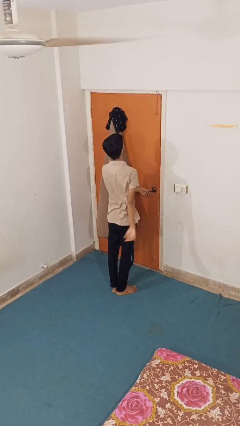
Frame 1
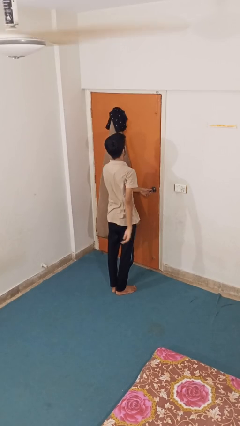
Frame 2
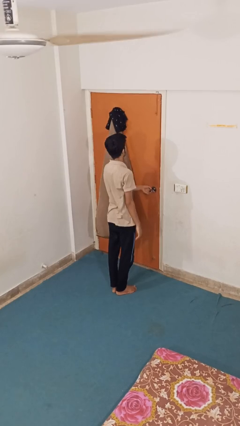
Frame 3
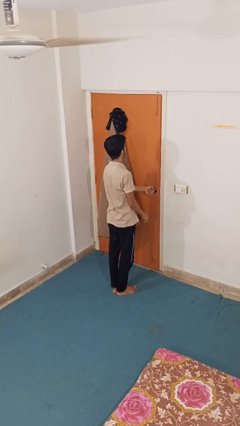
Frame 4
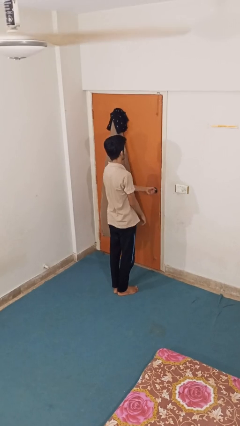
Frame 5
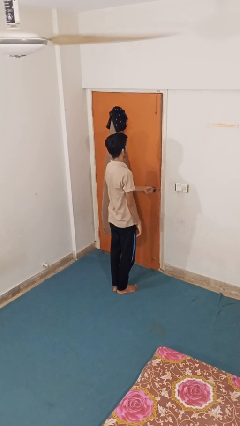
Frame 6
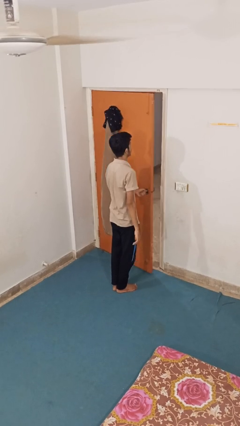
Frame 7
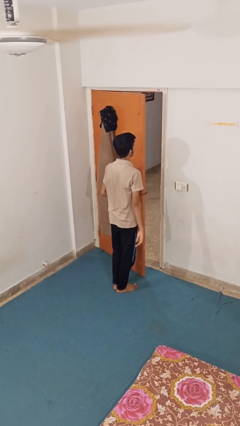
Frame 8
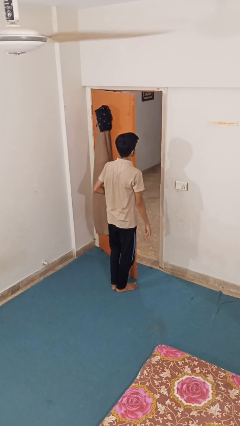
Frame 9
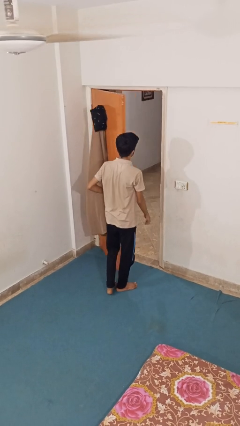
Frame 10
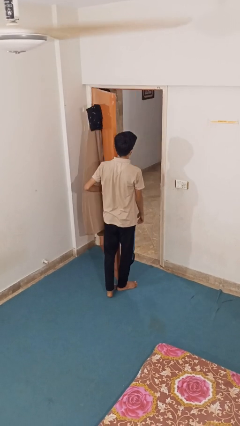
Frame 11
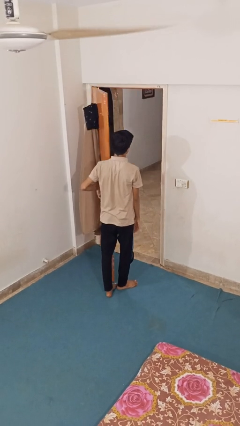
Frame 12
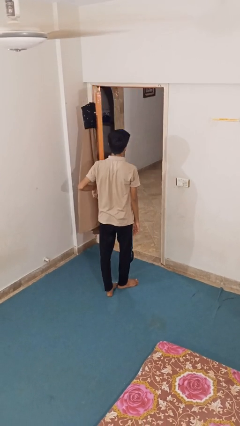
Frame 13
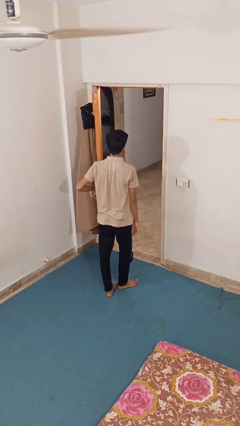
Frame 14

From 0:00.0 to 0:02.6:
person opens facility door

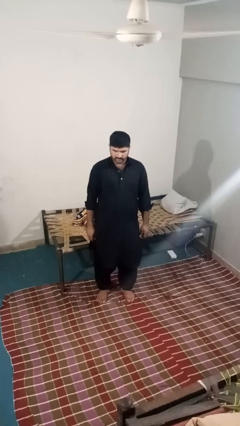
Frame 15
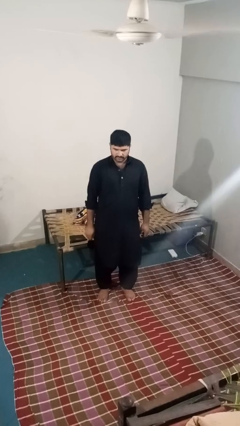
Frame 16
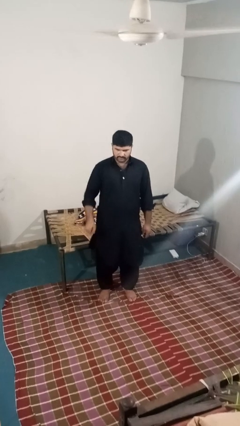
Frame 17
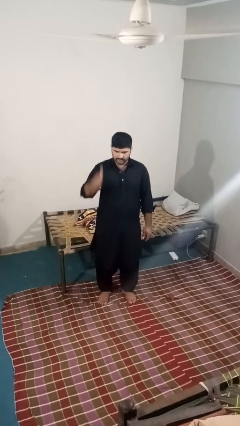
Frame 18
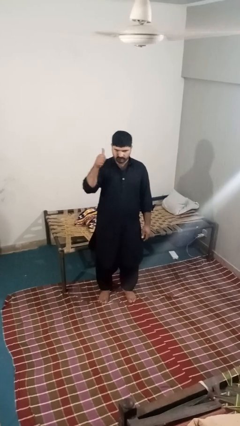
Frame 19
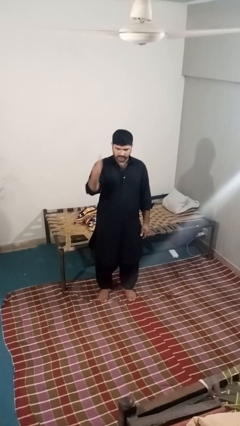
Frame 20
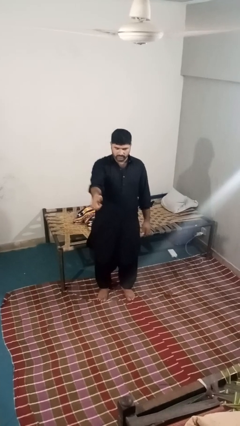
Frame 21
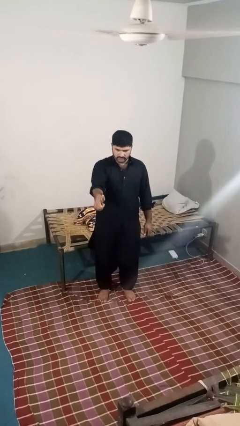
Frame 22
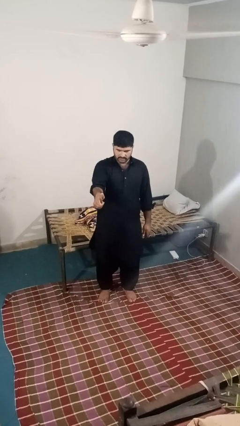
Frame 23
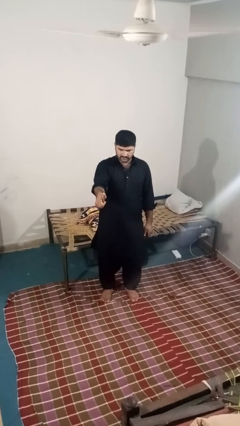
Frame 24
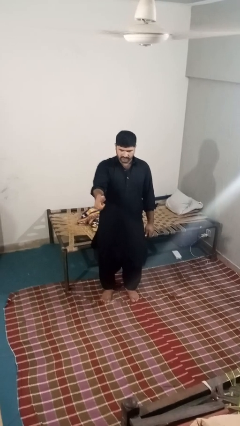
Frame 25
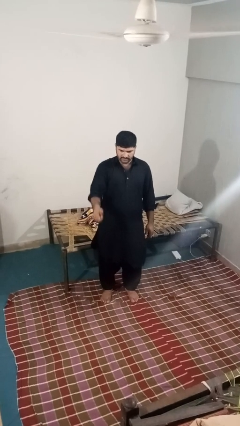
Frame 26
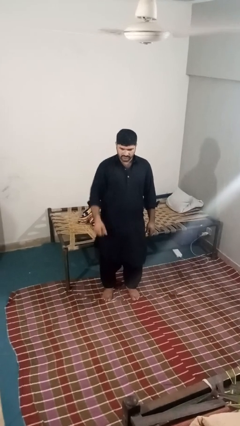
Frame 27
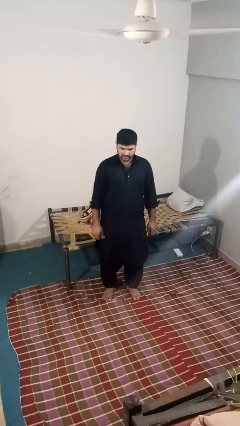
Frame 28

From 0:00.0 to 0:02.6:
person gestures thumbs up

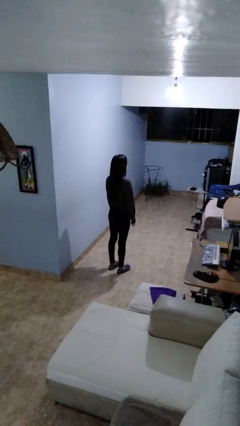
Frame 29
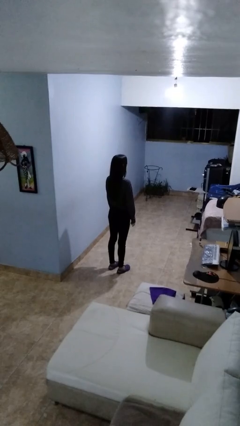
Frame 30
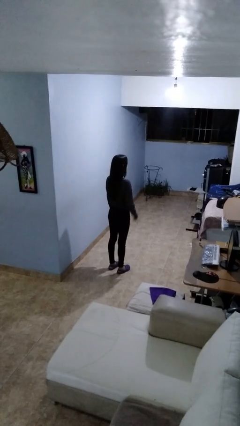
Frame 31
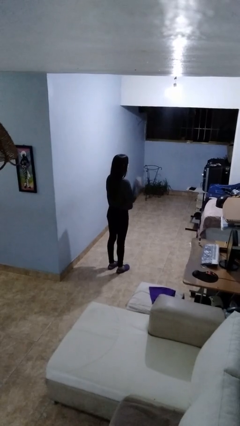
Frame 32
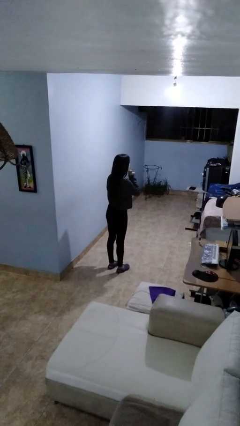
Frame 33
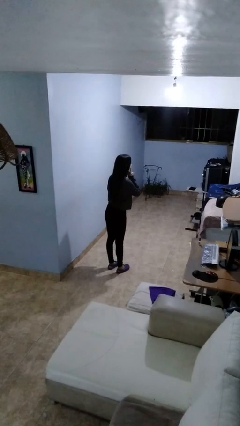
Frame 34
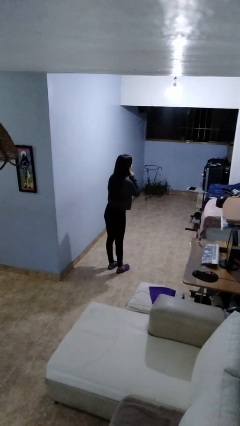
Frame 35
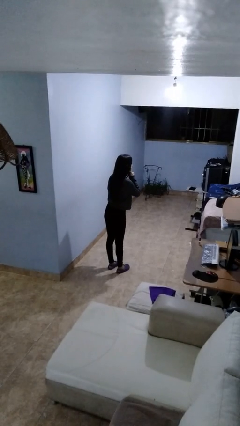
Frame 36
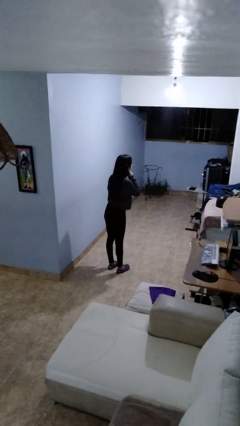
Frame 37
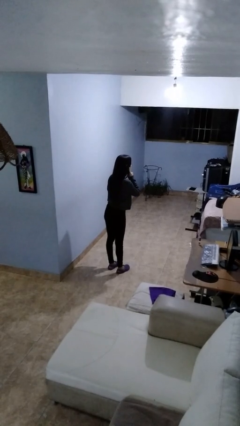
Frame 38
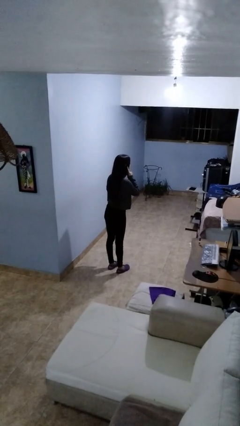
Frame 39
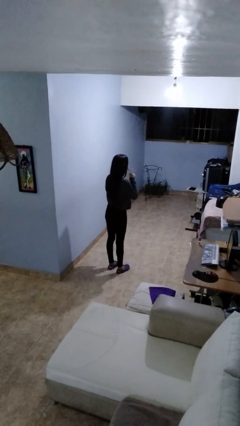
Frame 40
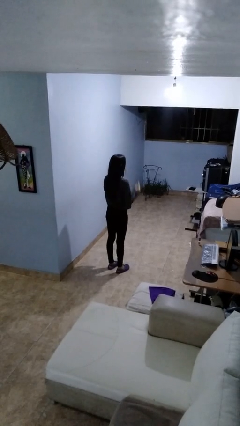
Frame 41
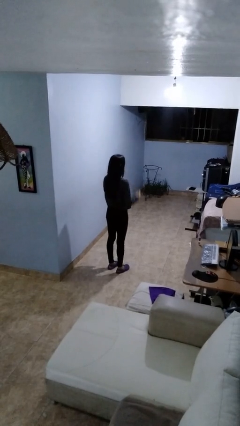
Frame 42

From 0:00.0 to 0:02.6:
person gestures listen closely

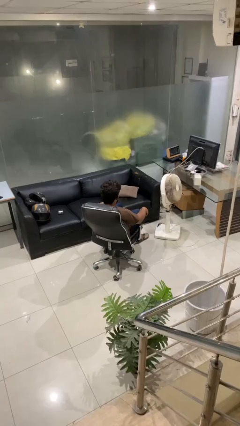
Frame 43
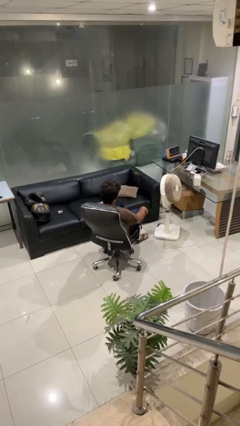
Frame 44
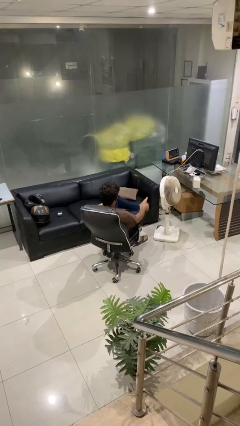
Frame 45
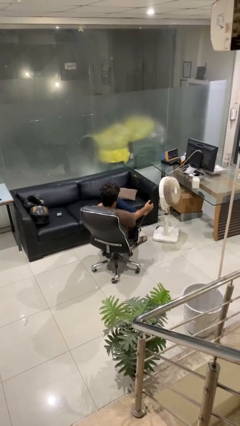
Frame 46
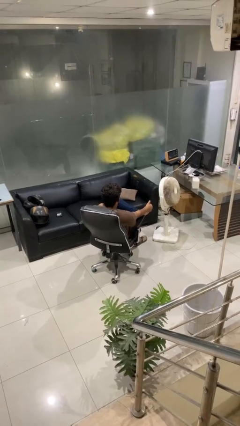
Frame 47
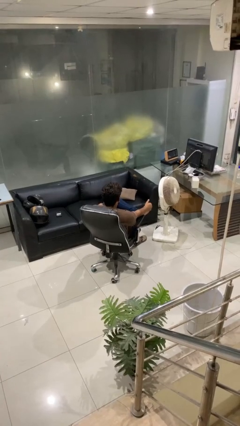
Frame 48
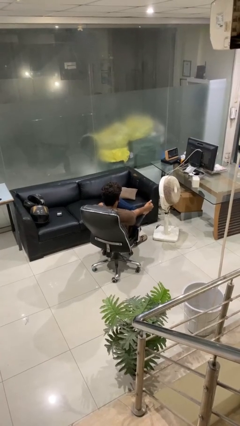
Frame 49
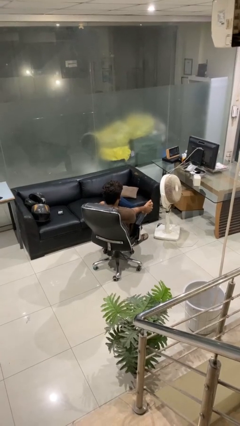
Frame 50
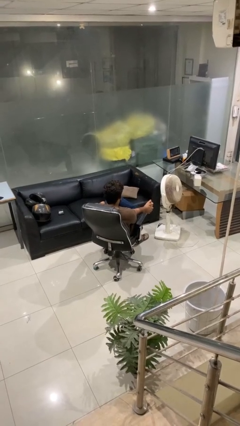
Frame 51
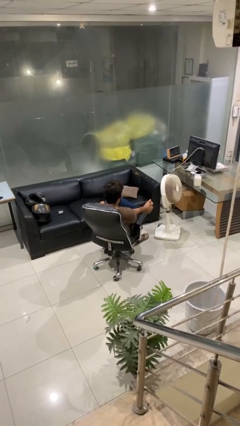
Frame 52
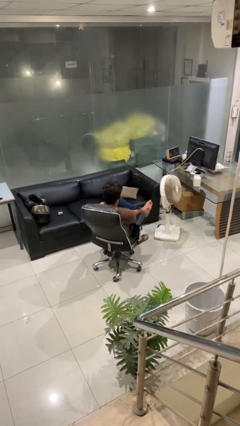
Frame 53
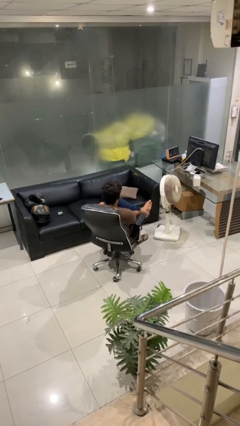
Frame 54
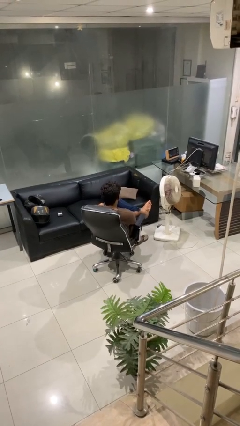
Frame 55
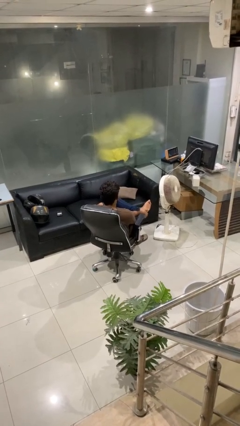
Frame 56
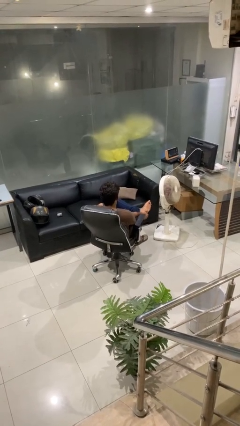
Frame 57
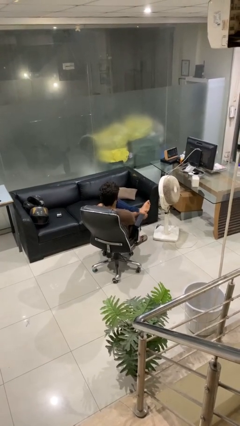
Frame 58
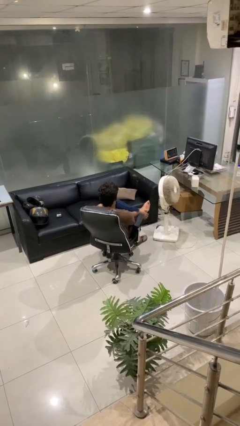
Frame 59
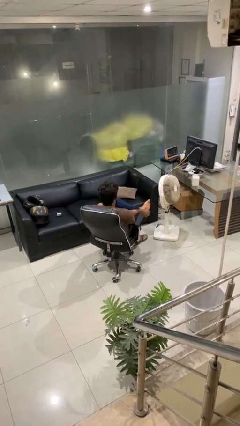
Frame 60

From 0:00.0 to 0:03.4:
person rubs foot

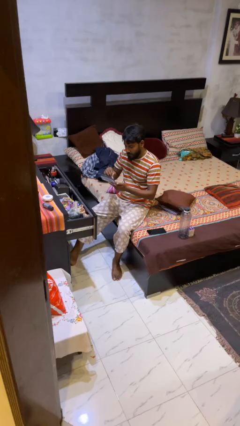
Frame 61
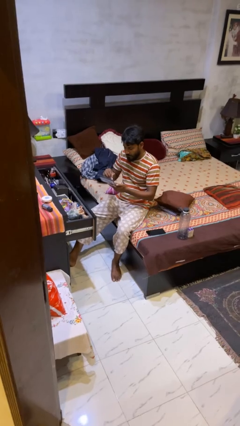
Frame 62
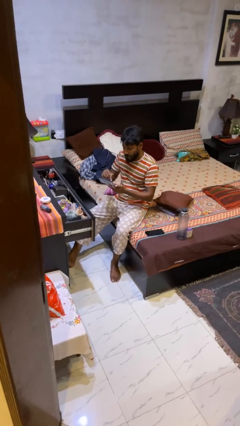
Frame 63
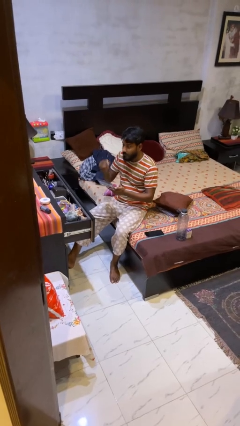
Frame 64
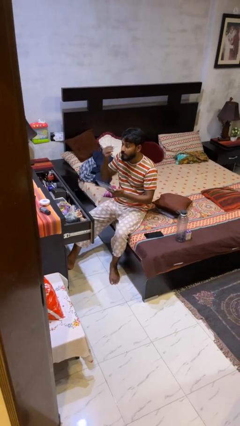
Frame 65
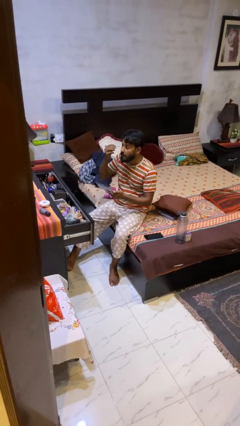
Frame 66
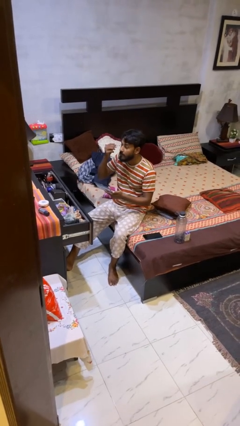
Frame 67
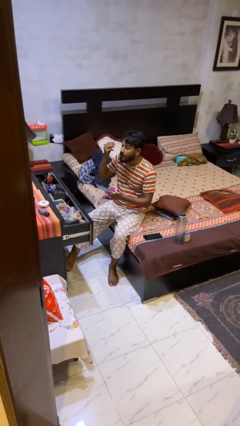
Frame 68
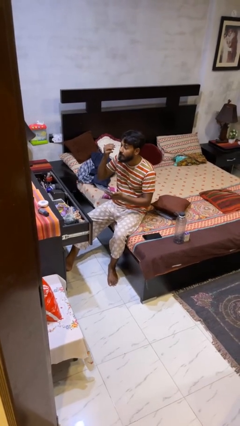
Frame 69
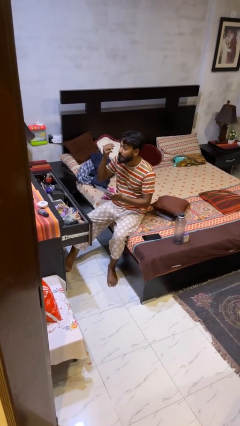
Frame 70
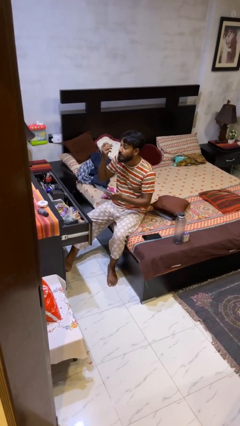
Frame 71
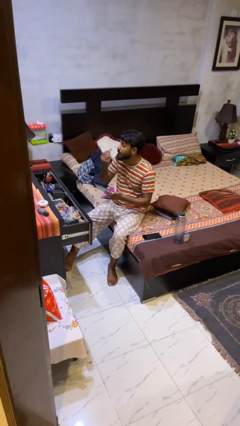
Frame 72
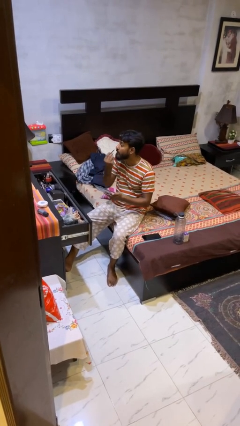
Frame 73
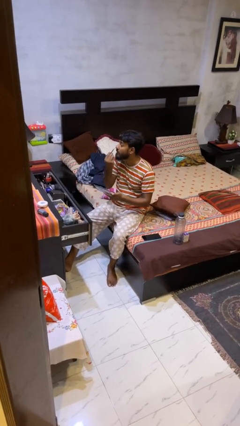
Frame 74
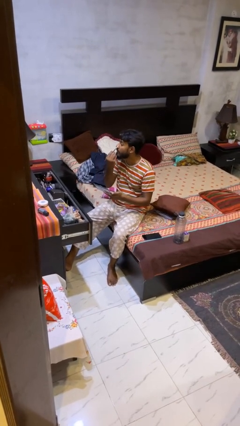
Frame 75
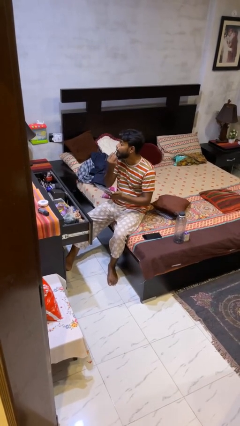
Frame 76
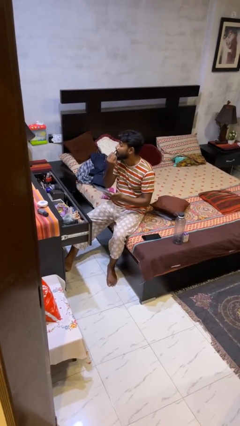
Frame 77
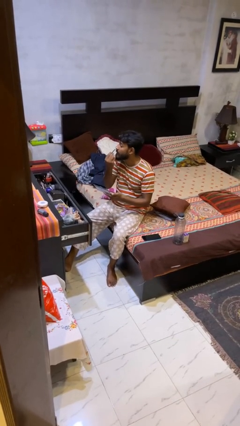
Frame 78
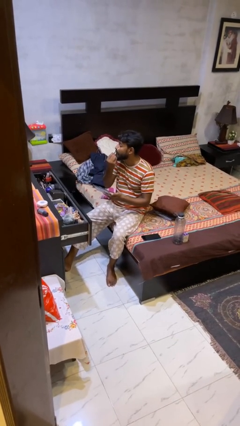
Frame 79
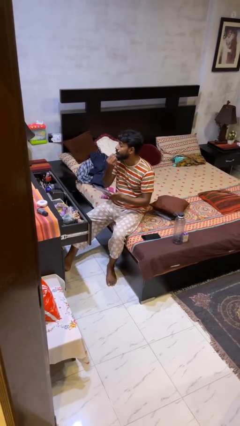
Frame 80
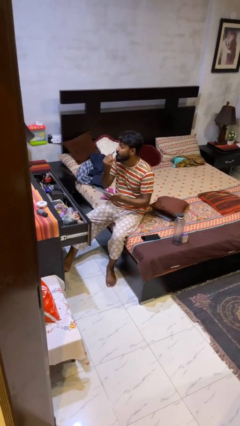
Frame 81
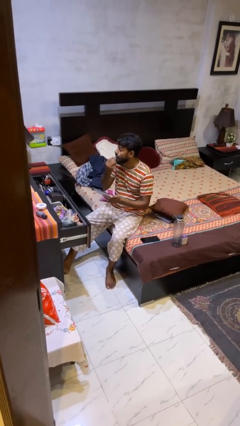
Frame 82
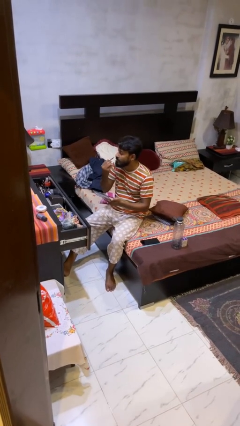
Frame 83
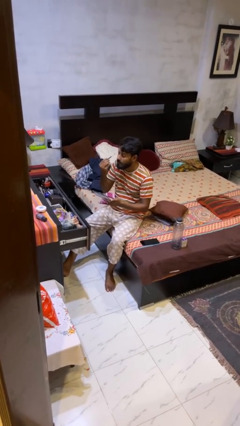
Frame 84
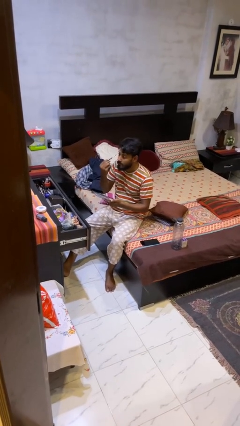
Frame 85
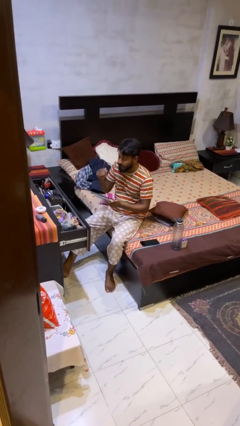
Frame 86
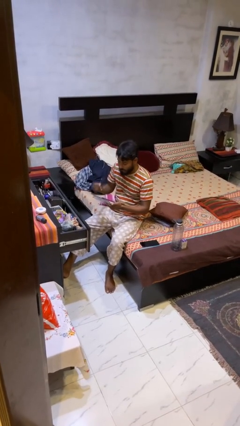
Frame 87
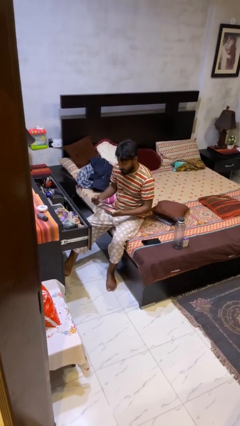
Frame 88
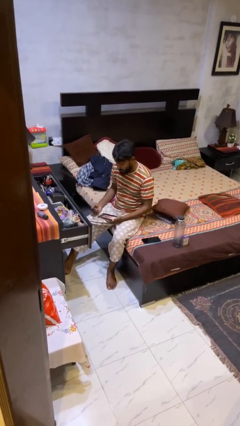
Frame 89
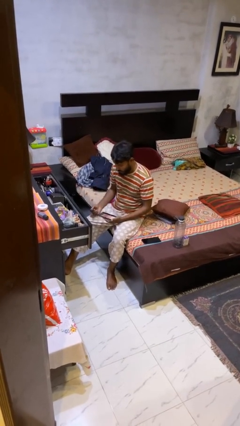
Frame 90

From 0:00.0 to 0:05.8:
person applies eye makeup

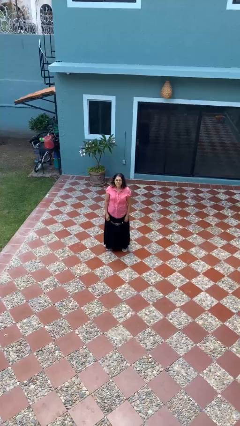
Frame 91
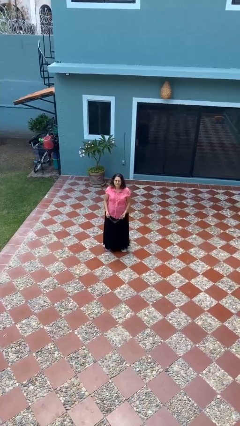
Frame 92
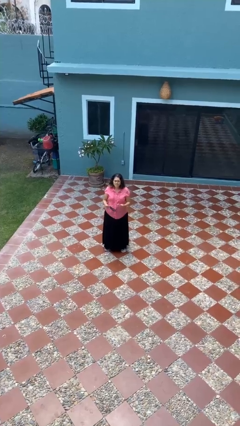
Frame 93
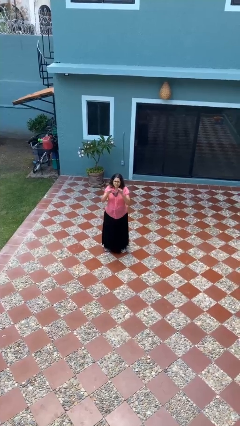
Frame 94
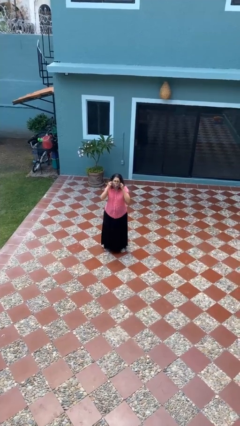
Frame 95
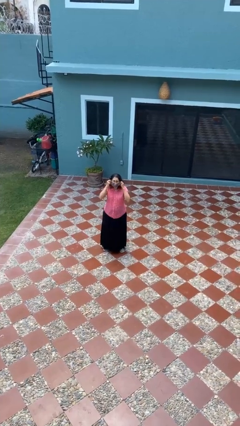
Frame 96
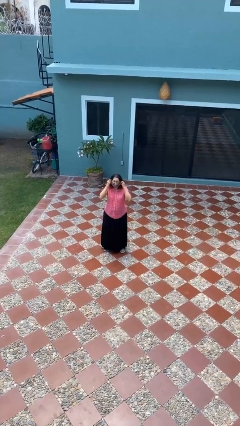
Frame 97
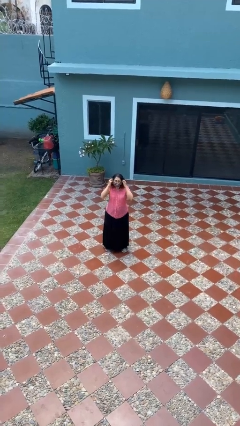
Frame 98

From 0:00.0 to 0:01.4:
person puts on facemask
